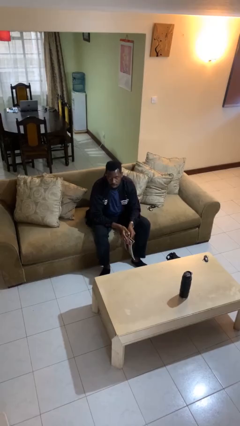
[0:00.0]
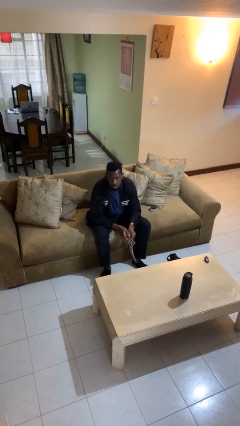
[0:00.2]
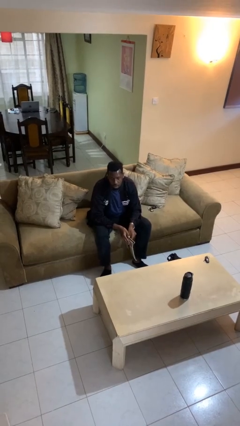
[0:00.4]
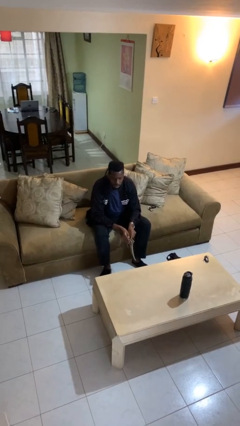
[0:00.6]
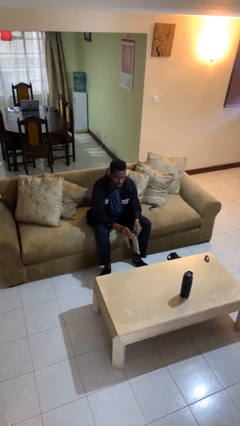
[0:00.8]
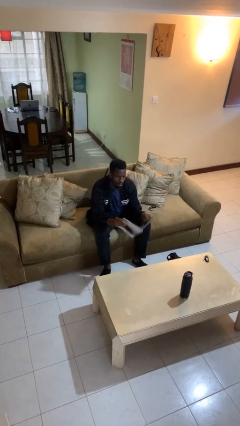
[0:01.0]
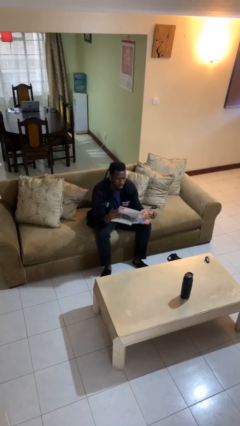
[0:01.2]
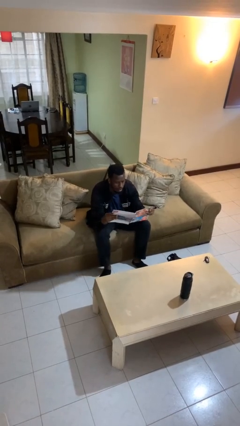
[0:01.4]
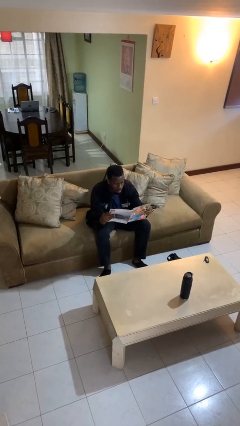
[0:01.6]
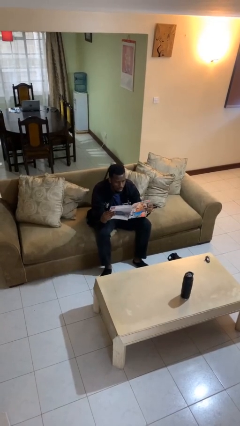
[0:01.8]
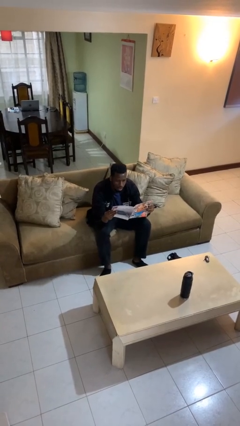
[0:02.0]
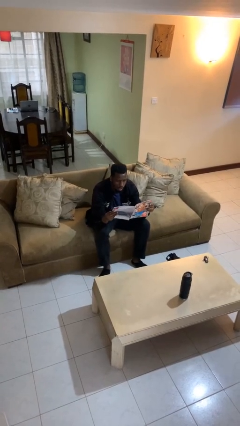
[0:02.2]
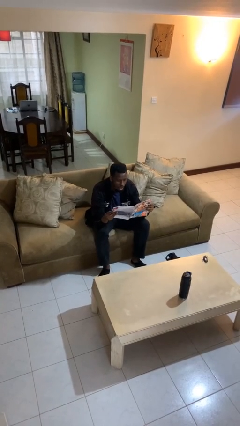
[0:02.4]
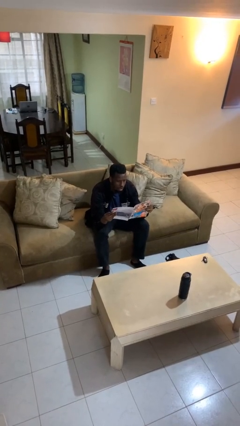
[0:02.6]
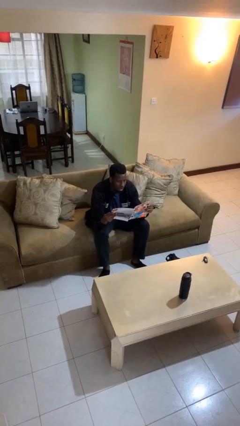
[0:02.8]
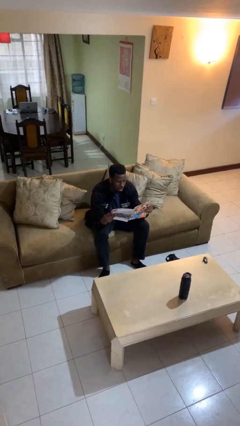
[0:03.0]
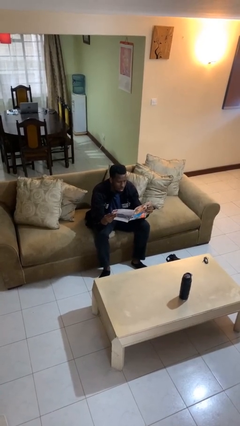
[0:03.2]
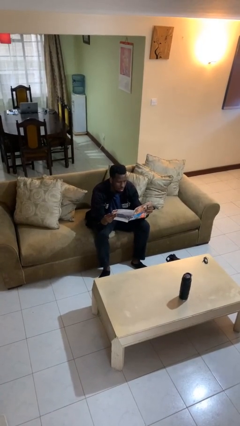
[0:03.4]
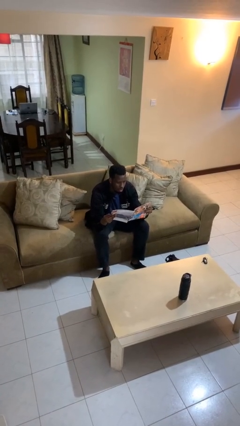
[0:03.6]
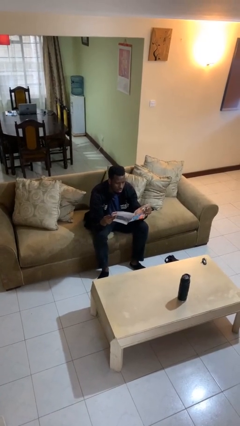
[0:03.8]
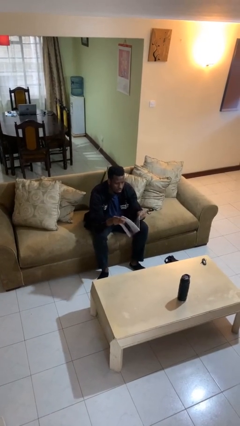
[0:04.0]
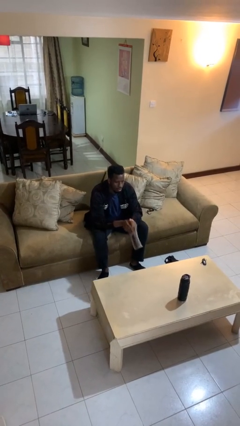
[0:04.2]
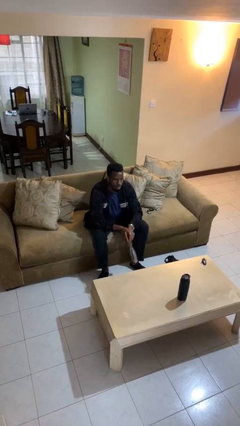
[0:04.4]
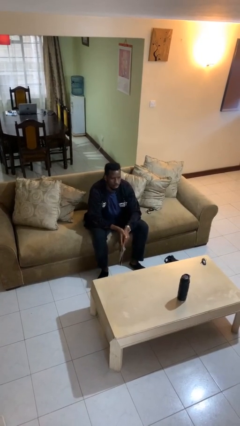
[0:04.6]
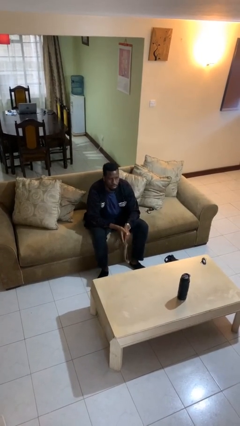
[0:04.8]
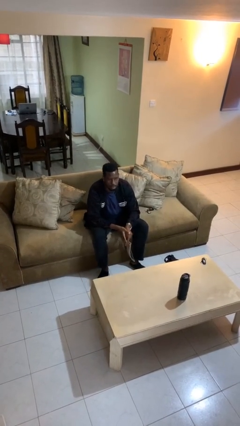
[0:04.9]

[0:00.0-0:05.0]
person reads magazine

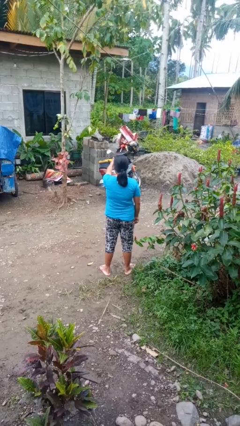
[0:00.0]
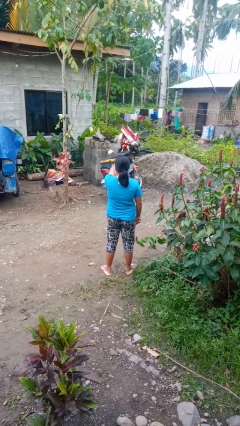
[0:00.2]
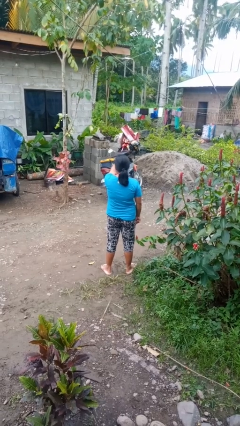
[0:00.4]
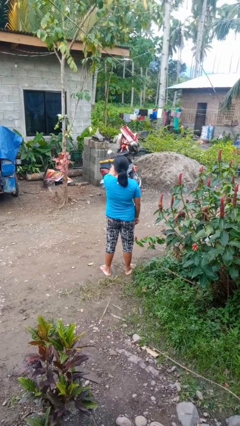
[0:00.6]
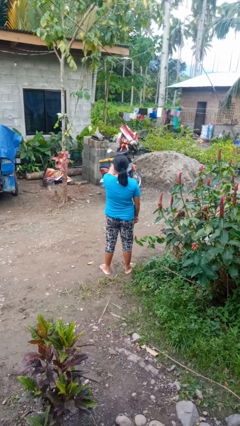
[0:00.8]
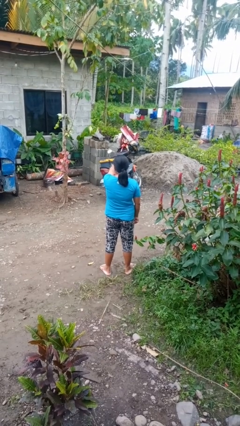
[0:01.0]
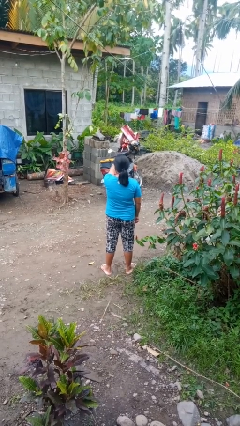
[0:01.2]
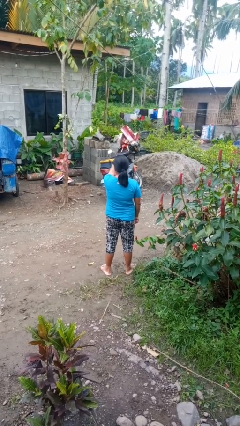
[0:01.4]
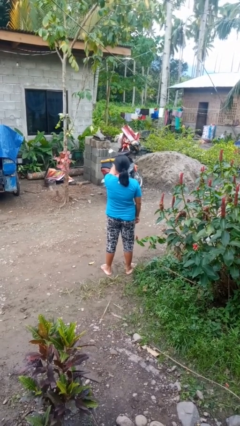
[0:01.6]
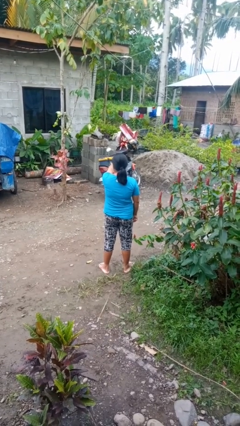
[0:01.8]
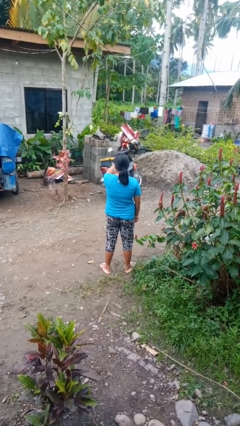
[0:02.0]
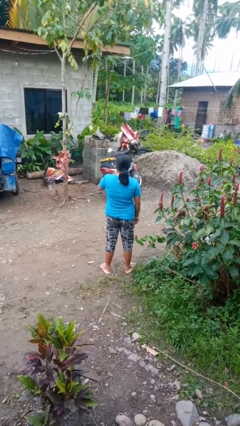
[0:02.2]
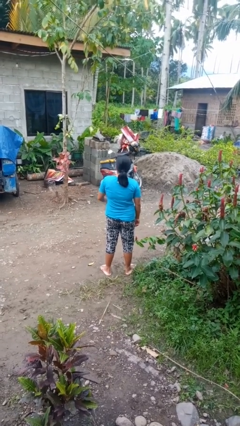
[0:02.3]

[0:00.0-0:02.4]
person gestures thumbs up

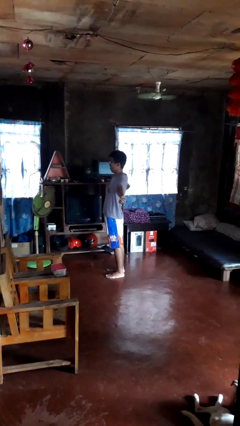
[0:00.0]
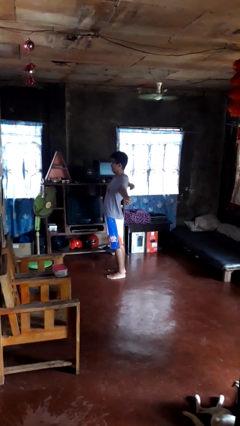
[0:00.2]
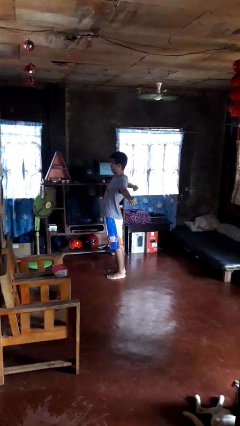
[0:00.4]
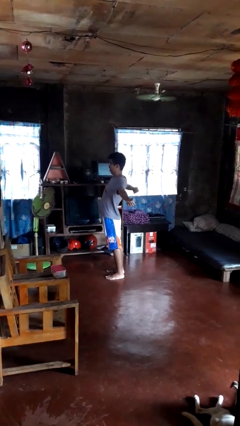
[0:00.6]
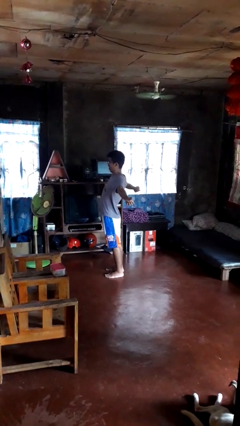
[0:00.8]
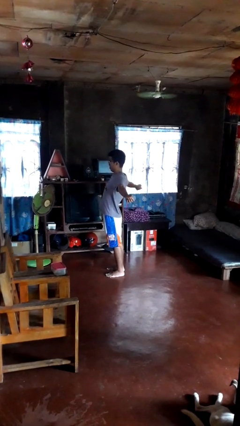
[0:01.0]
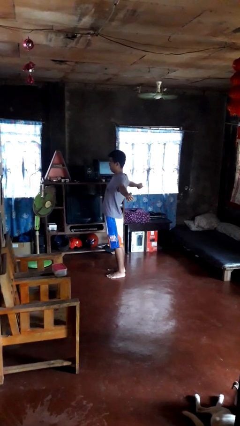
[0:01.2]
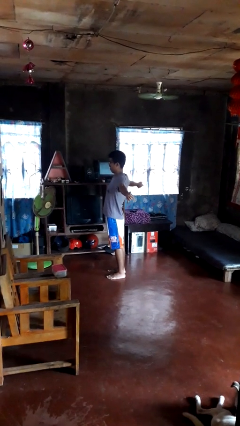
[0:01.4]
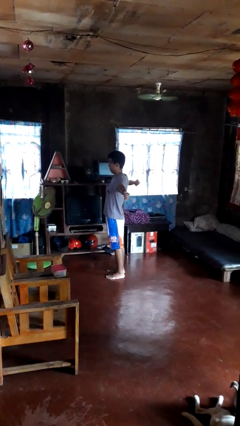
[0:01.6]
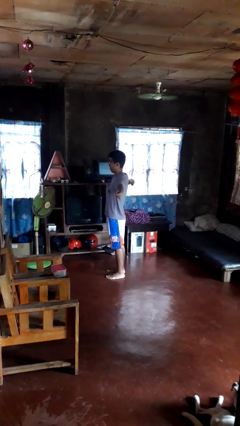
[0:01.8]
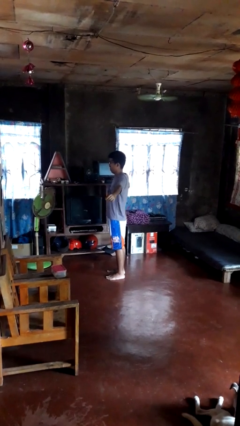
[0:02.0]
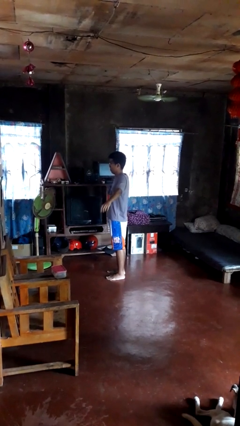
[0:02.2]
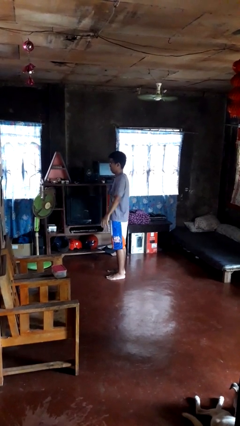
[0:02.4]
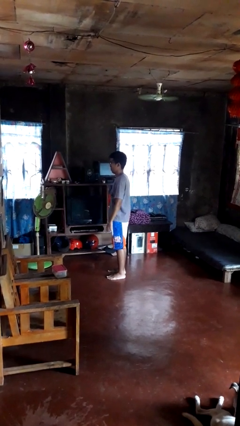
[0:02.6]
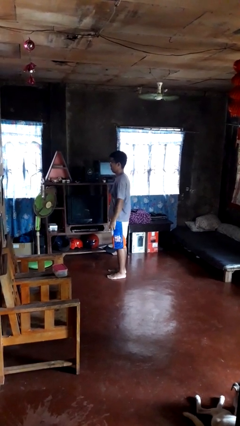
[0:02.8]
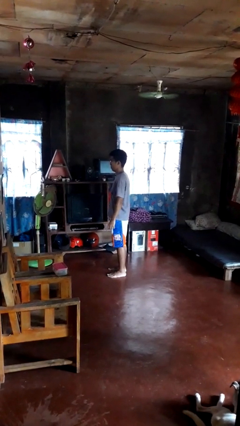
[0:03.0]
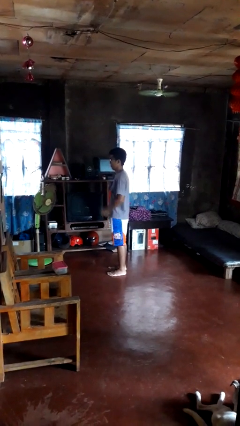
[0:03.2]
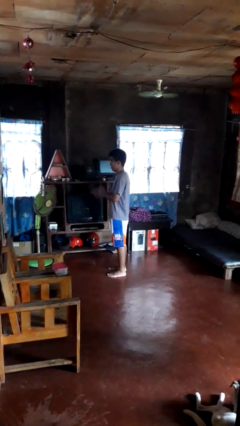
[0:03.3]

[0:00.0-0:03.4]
person stretches arms to side

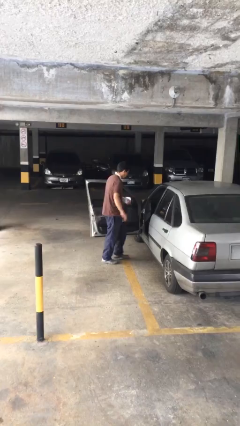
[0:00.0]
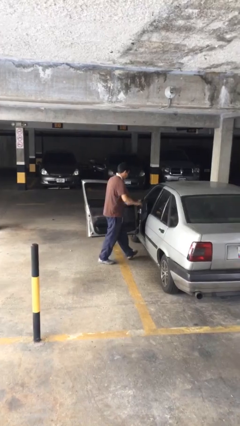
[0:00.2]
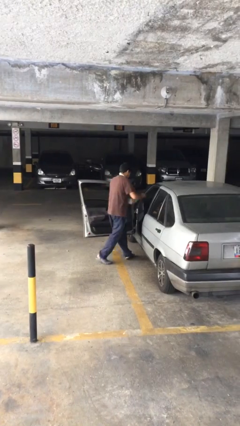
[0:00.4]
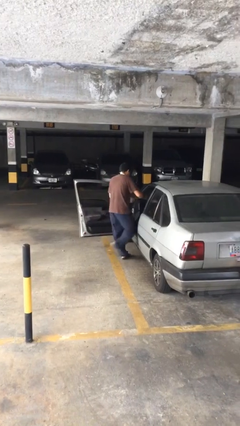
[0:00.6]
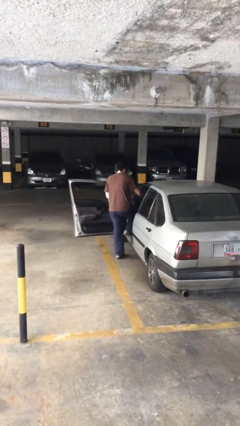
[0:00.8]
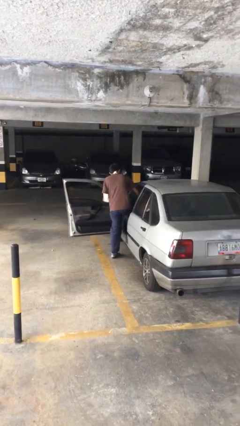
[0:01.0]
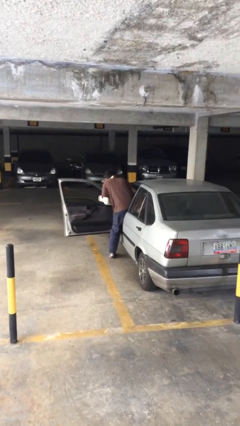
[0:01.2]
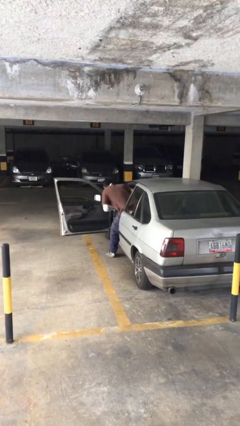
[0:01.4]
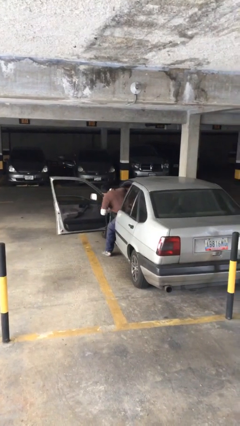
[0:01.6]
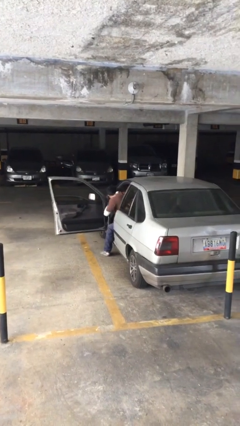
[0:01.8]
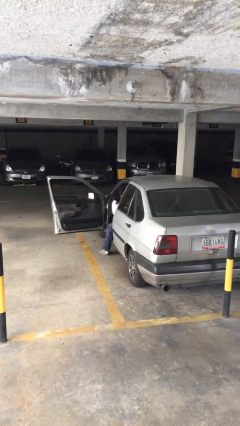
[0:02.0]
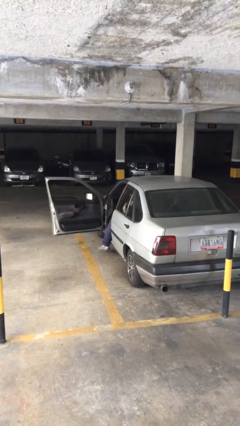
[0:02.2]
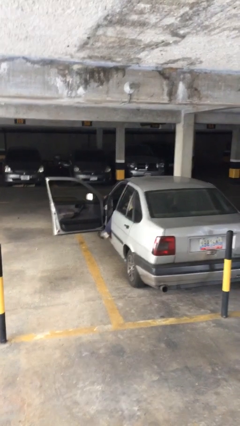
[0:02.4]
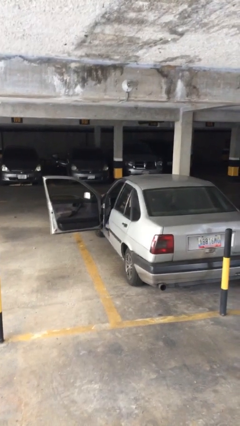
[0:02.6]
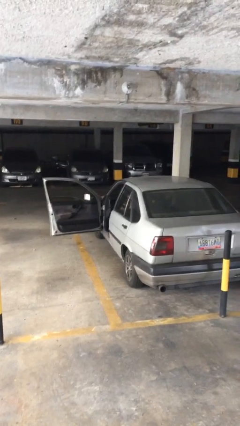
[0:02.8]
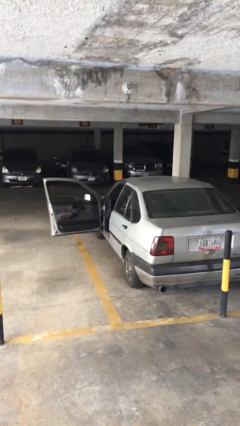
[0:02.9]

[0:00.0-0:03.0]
person enters car

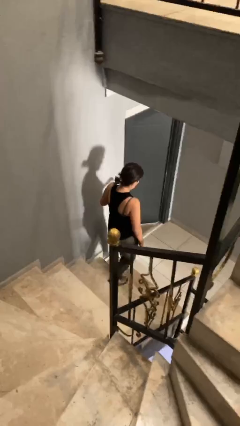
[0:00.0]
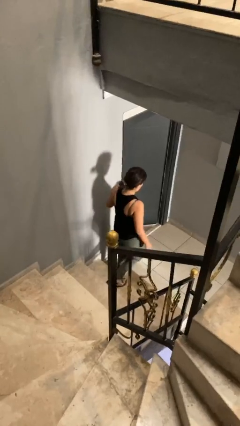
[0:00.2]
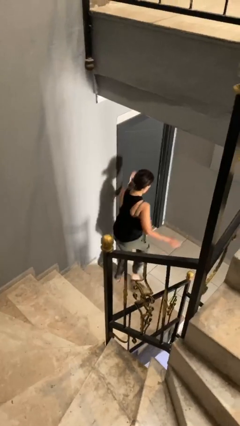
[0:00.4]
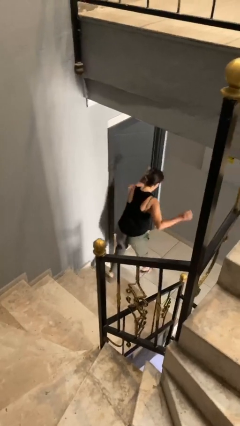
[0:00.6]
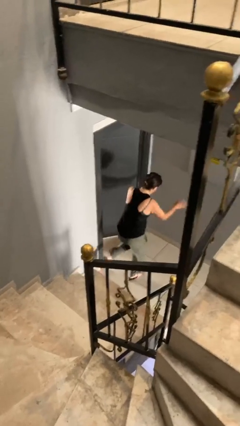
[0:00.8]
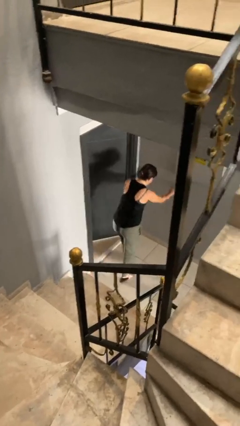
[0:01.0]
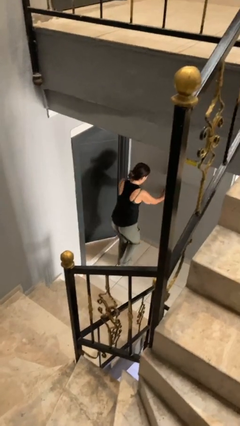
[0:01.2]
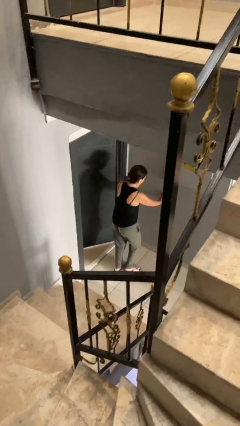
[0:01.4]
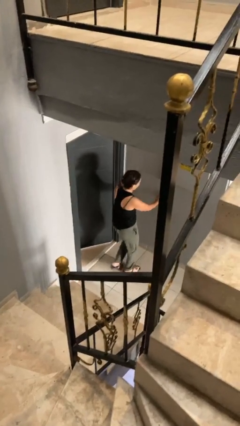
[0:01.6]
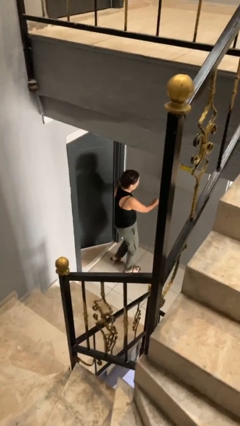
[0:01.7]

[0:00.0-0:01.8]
person trips on stair

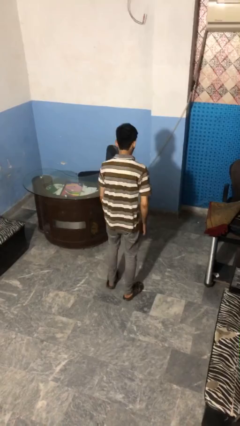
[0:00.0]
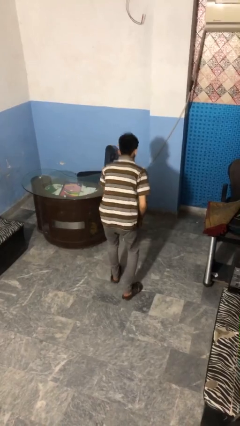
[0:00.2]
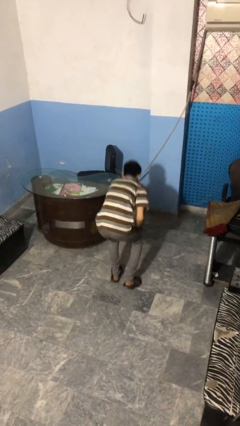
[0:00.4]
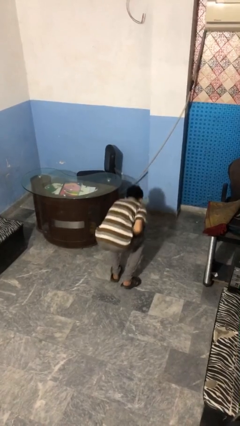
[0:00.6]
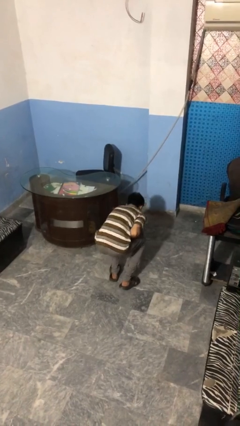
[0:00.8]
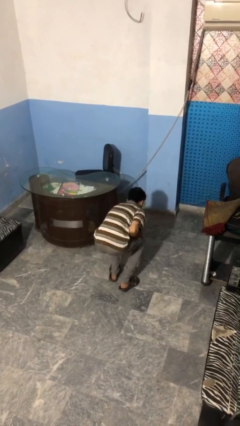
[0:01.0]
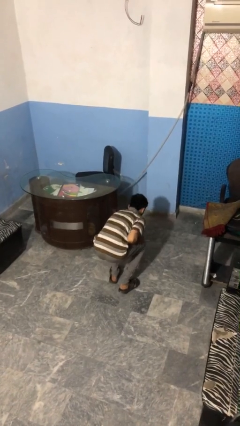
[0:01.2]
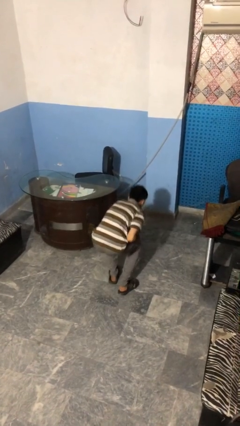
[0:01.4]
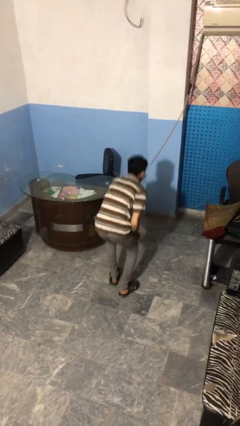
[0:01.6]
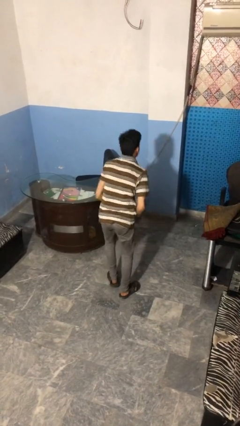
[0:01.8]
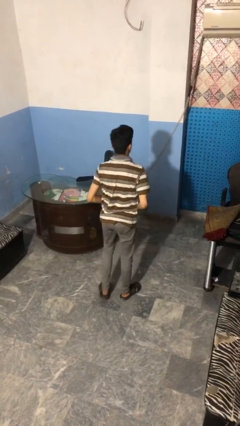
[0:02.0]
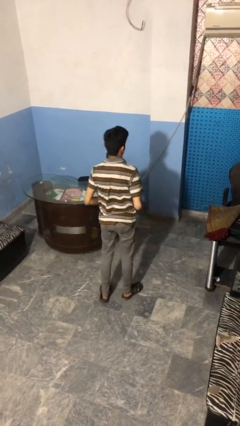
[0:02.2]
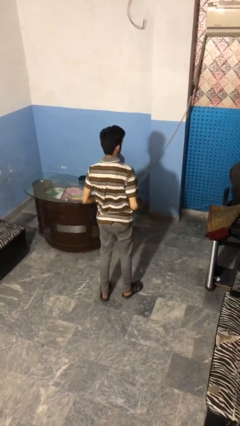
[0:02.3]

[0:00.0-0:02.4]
person picks up object from floor
